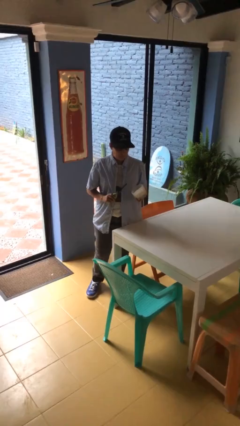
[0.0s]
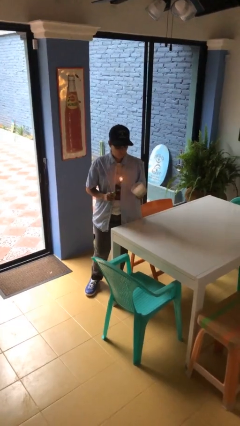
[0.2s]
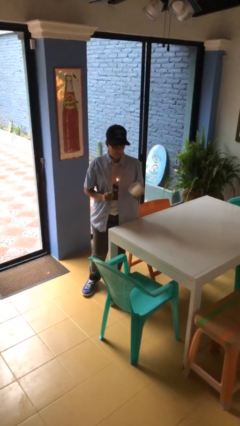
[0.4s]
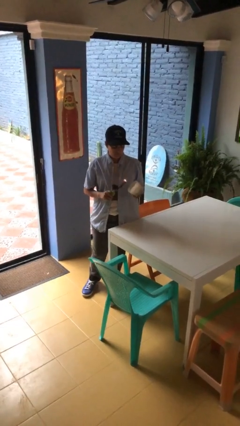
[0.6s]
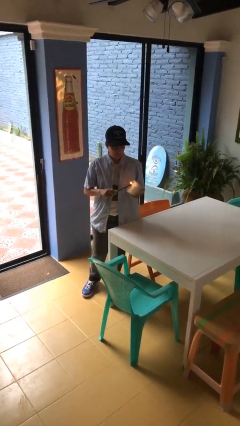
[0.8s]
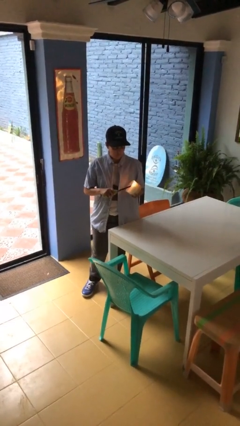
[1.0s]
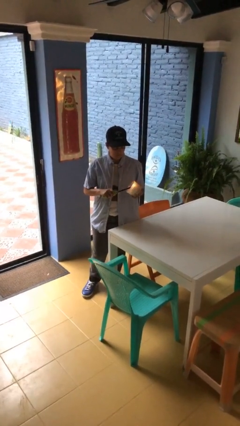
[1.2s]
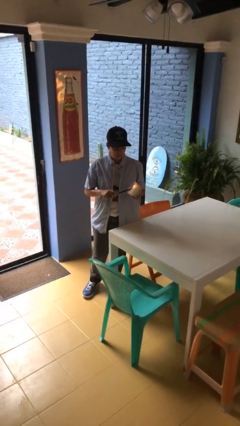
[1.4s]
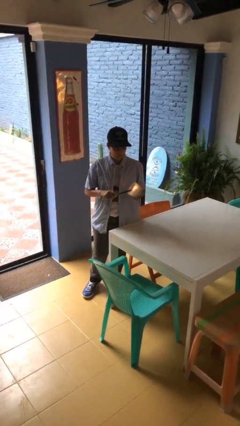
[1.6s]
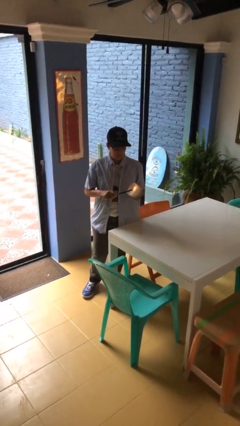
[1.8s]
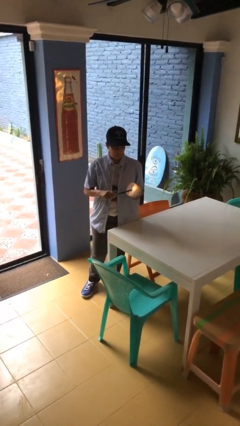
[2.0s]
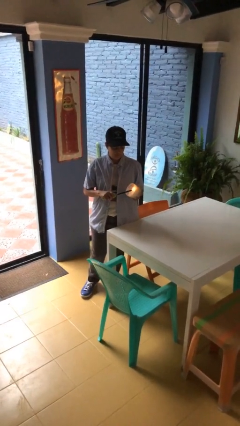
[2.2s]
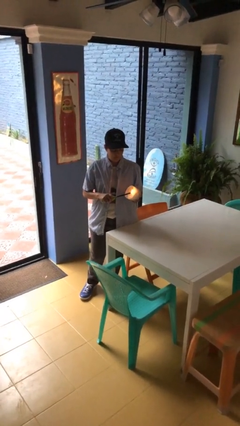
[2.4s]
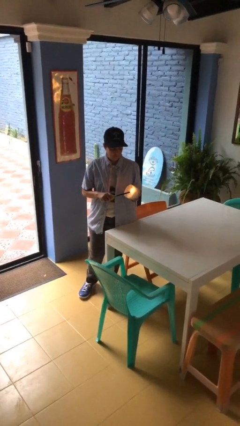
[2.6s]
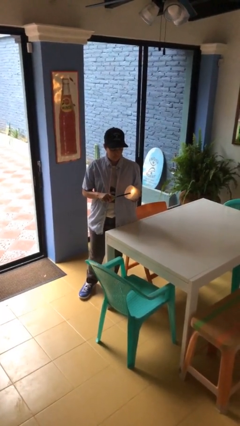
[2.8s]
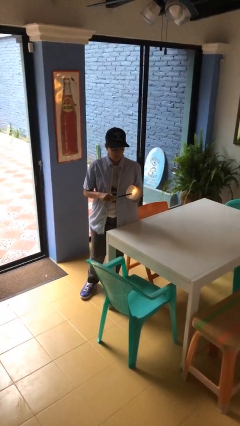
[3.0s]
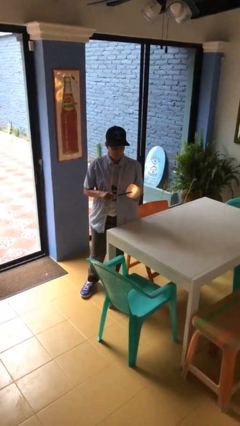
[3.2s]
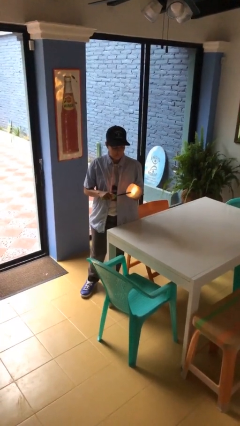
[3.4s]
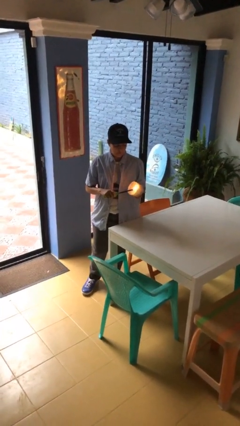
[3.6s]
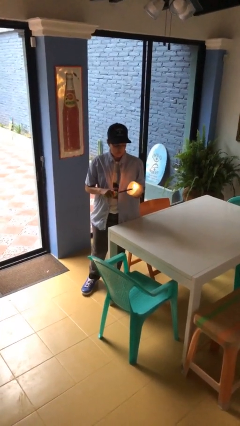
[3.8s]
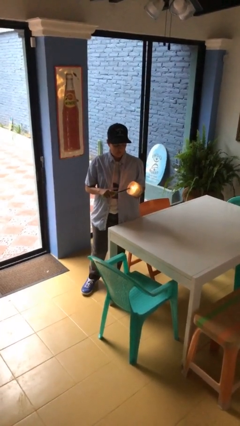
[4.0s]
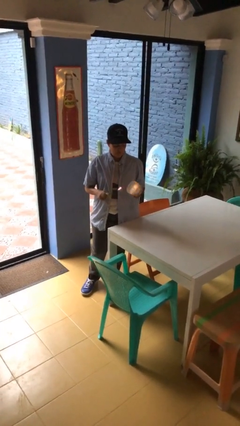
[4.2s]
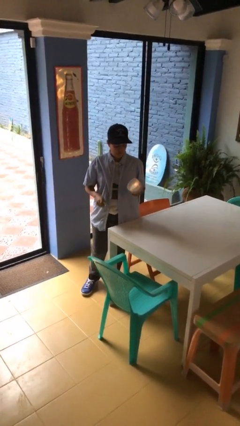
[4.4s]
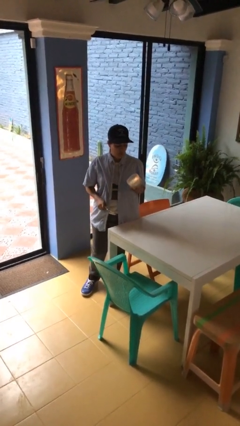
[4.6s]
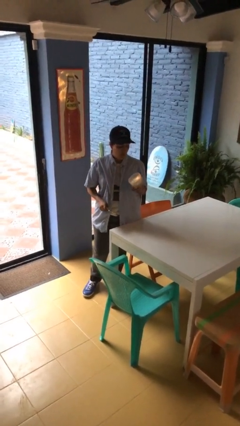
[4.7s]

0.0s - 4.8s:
person lights candle

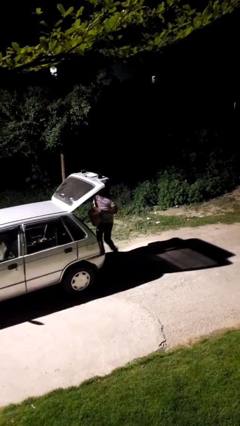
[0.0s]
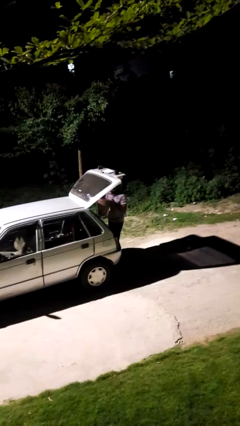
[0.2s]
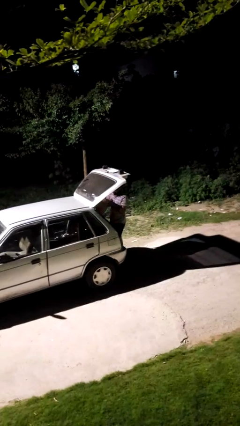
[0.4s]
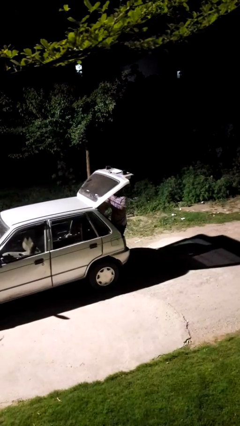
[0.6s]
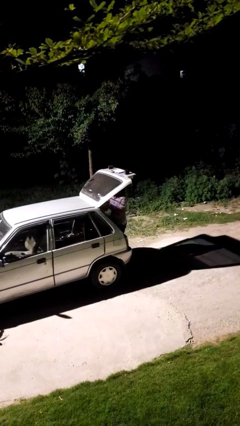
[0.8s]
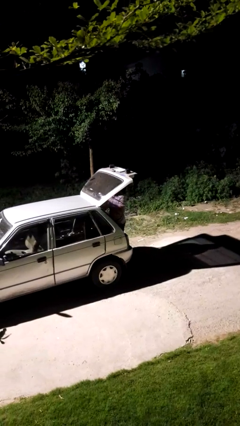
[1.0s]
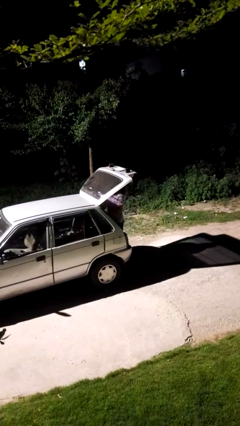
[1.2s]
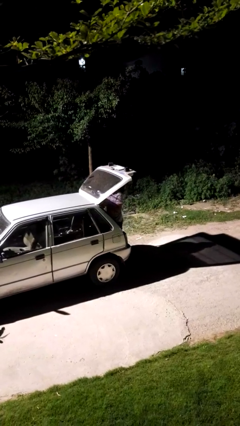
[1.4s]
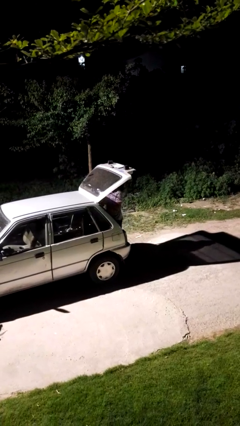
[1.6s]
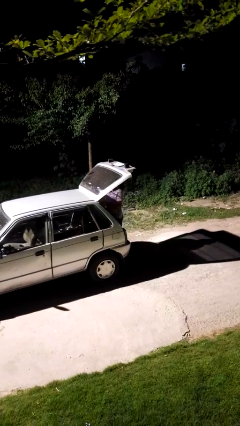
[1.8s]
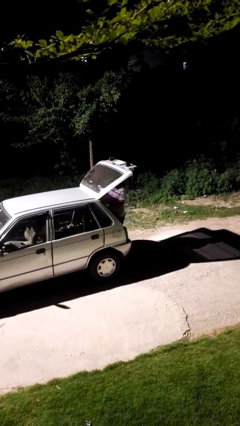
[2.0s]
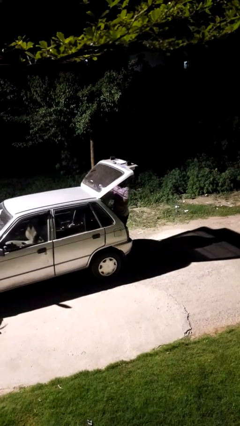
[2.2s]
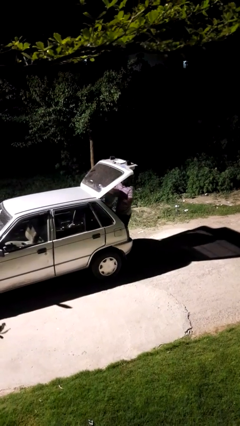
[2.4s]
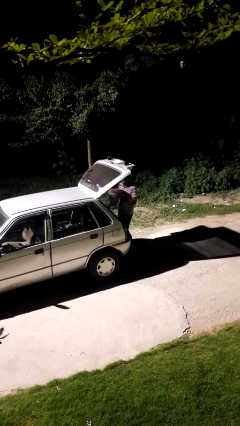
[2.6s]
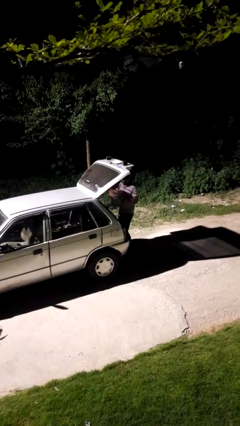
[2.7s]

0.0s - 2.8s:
person loads car

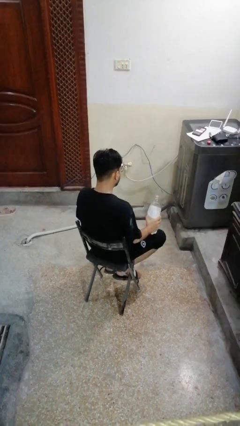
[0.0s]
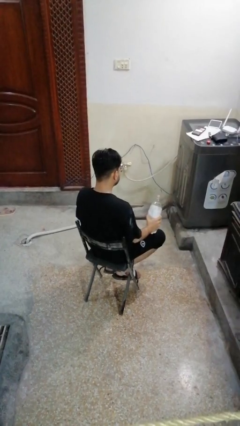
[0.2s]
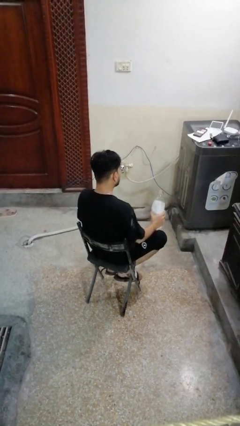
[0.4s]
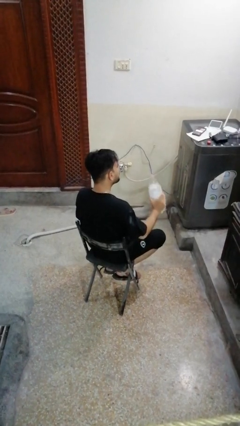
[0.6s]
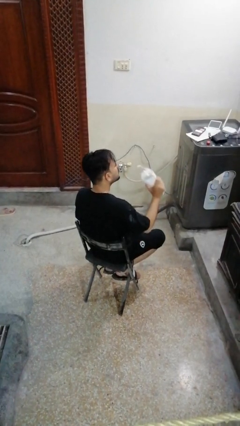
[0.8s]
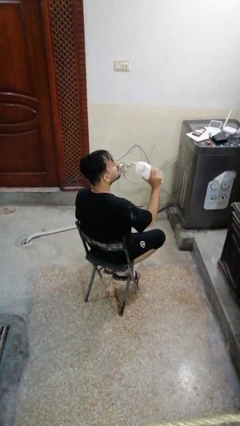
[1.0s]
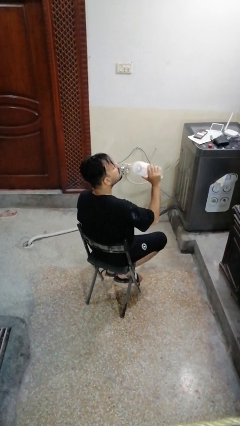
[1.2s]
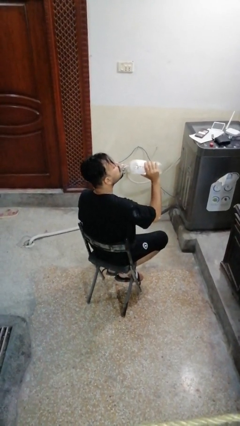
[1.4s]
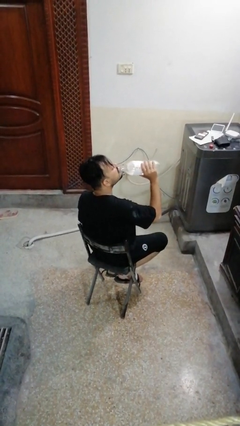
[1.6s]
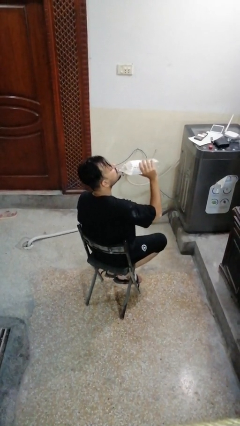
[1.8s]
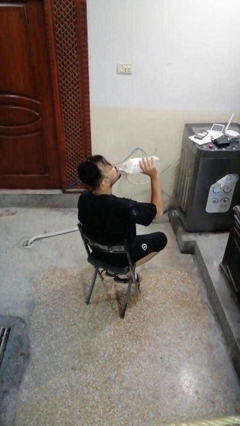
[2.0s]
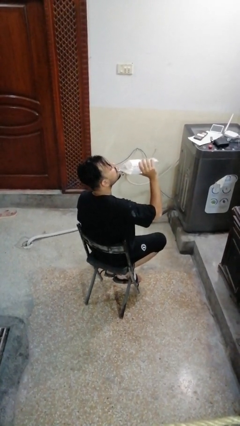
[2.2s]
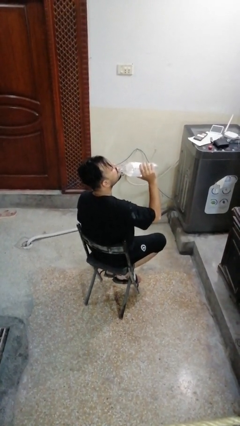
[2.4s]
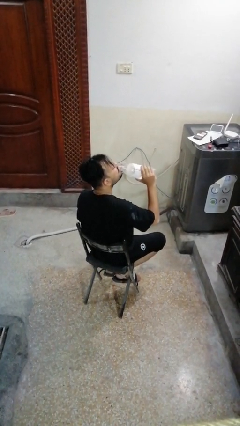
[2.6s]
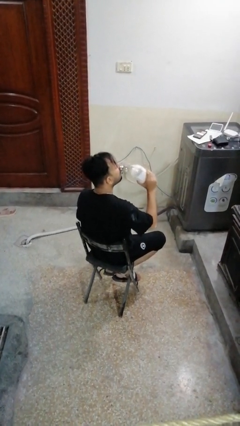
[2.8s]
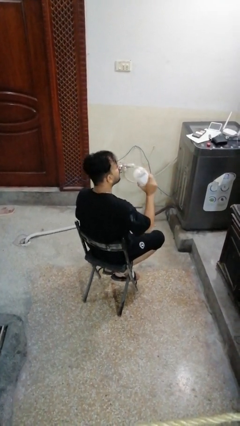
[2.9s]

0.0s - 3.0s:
person drinks from bottle

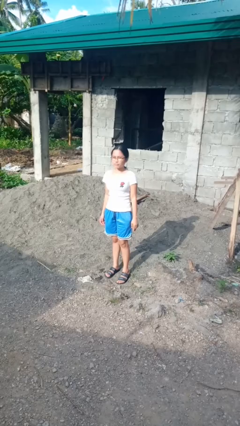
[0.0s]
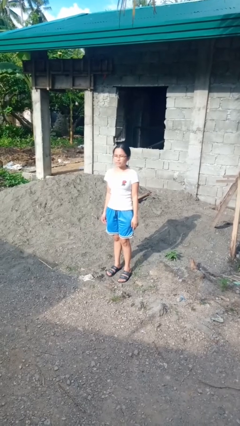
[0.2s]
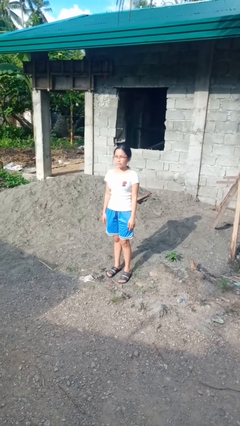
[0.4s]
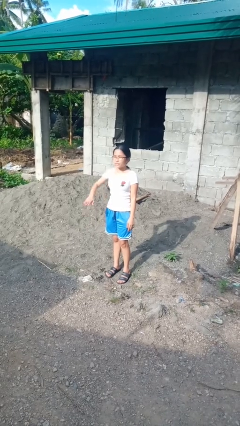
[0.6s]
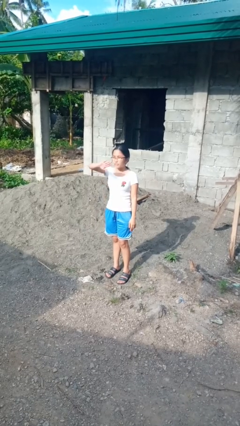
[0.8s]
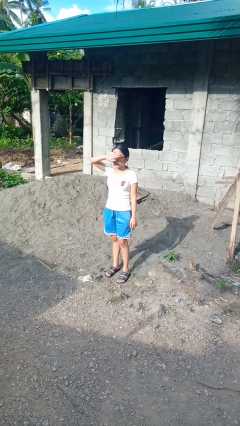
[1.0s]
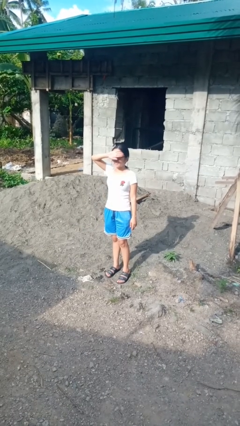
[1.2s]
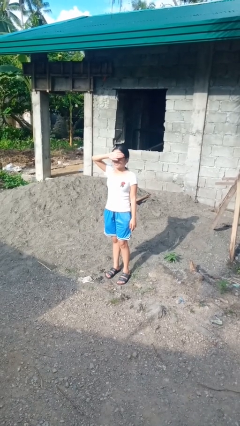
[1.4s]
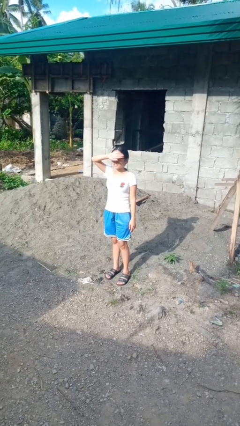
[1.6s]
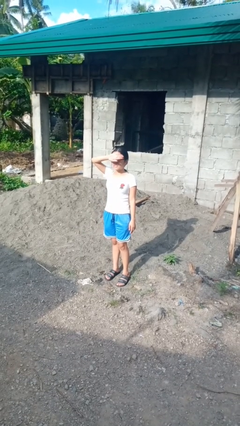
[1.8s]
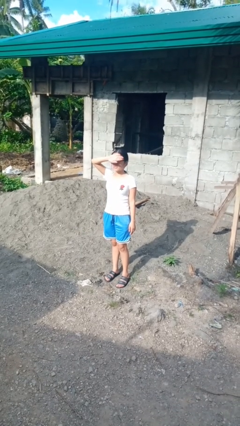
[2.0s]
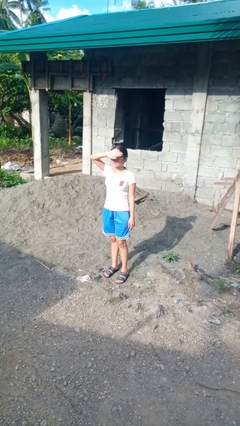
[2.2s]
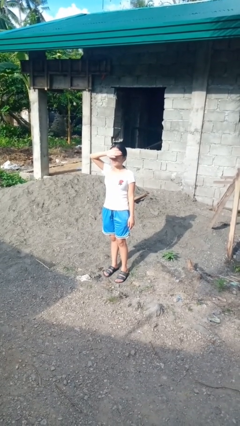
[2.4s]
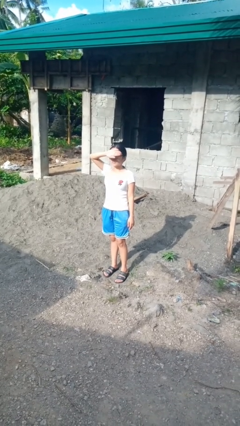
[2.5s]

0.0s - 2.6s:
person shades eyes

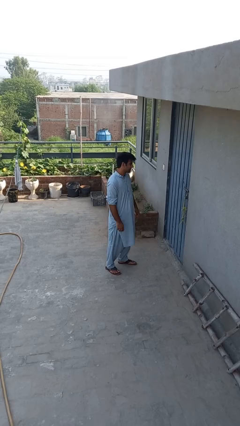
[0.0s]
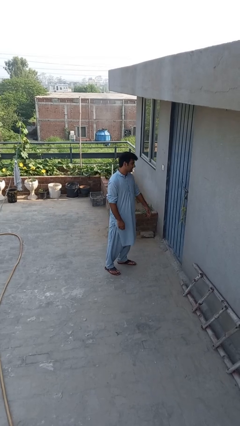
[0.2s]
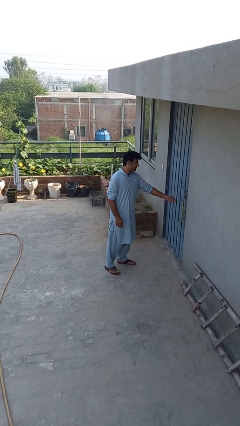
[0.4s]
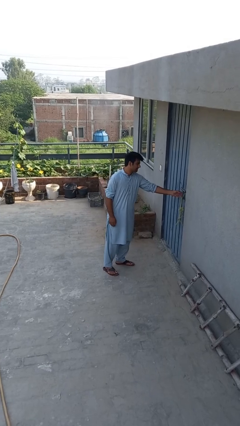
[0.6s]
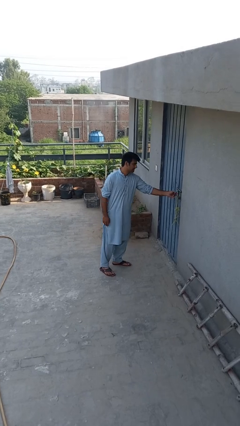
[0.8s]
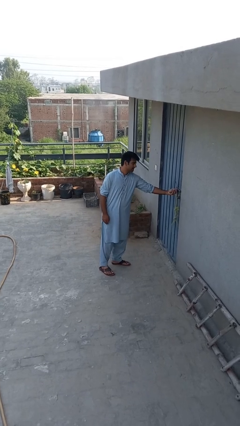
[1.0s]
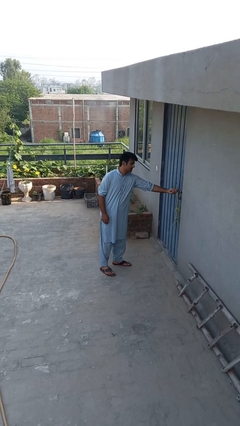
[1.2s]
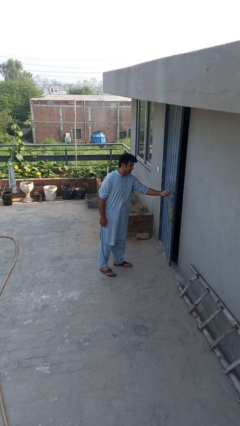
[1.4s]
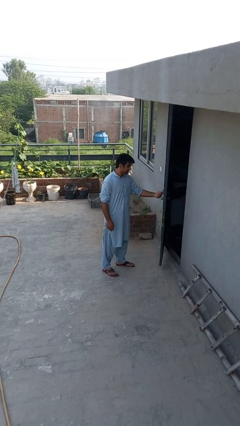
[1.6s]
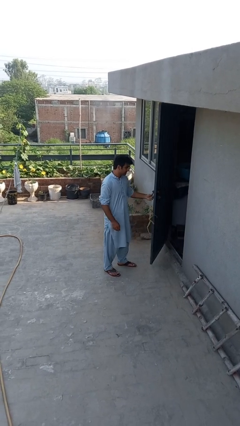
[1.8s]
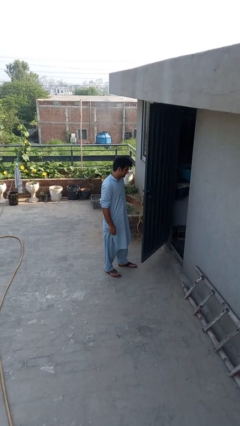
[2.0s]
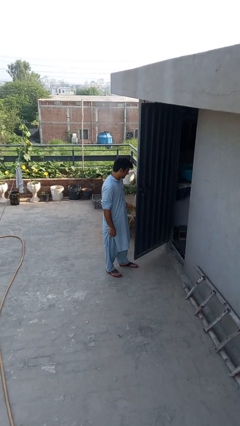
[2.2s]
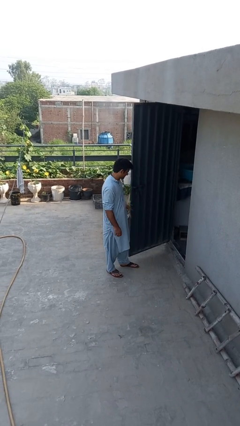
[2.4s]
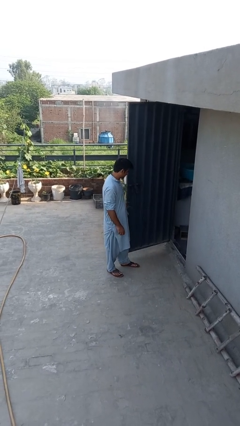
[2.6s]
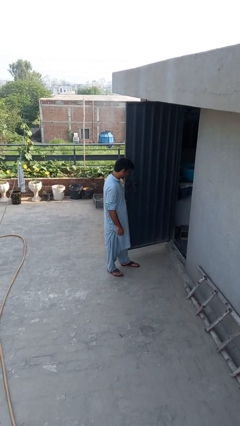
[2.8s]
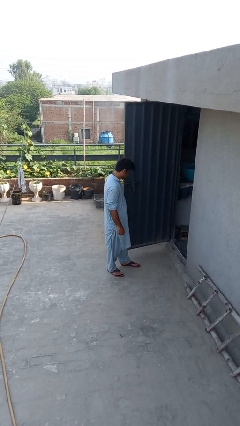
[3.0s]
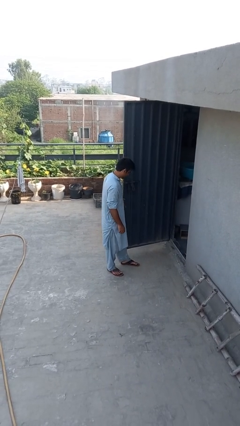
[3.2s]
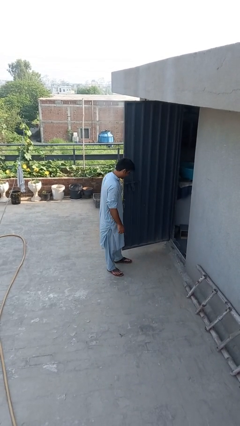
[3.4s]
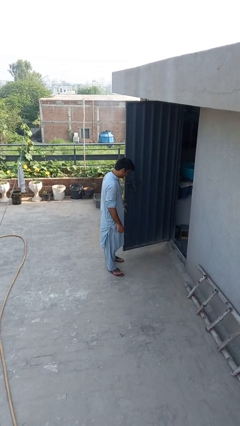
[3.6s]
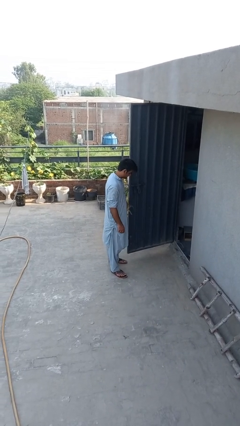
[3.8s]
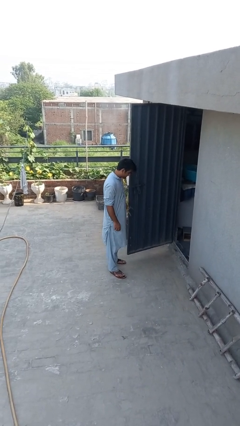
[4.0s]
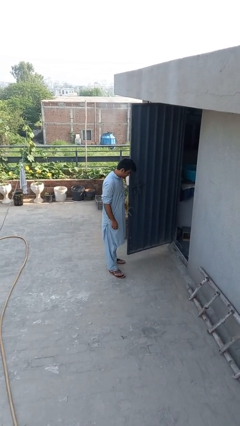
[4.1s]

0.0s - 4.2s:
person opens facility door
